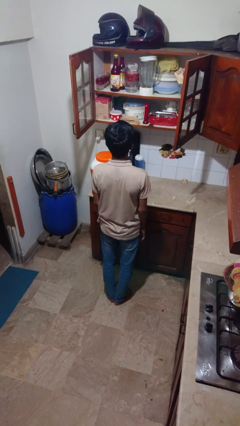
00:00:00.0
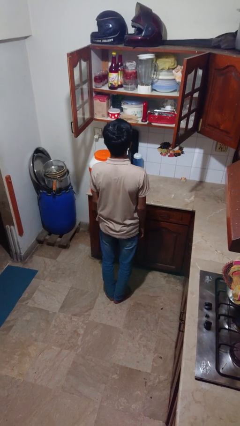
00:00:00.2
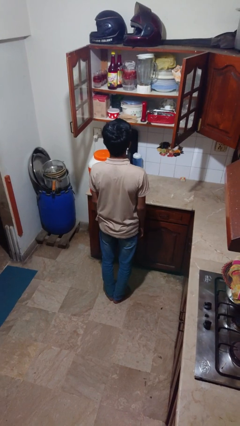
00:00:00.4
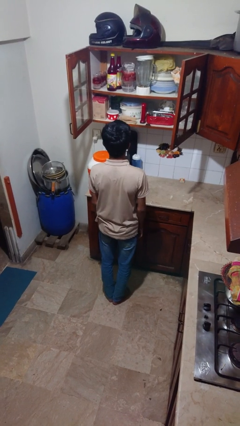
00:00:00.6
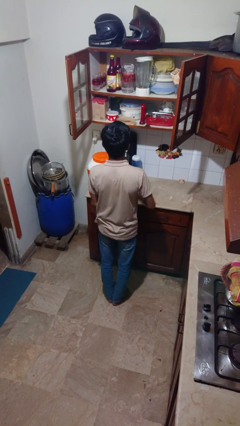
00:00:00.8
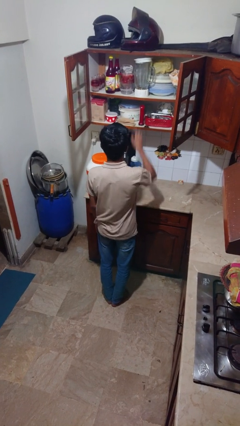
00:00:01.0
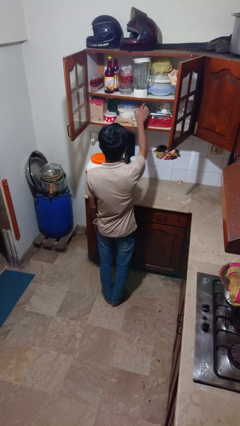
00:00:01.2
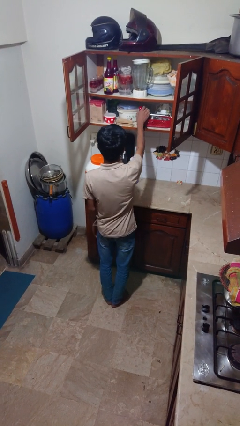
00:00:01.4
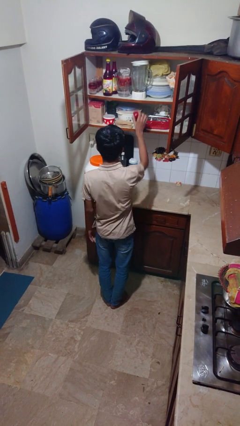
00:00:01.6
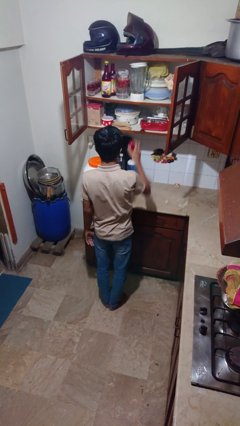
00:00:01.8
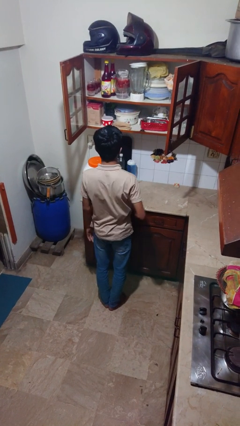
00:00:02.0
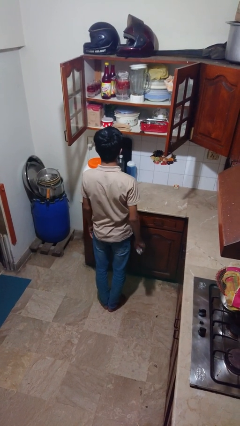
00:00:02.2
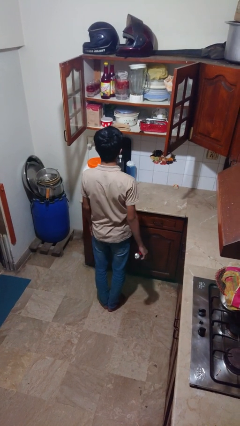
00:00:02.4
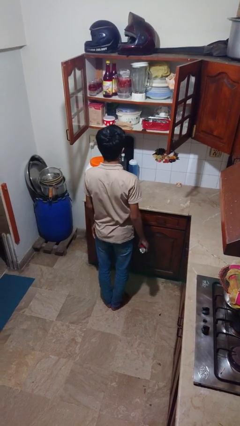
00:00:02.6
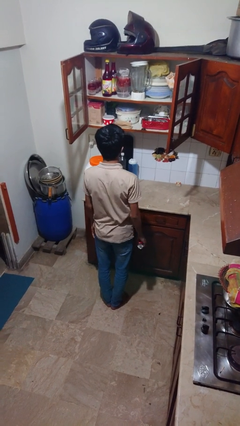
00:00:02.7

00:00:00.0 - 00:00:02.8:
person picks up object from cabinet

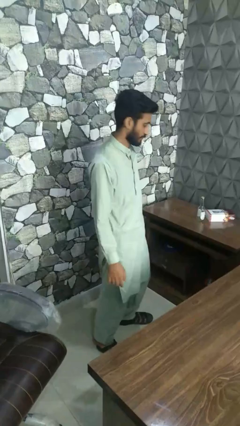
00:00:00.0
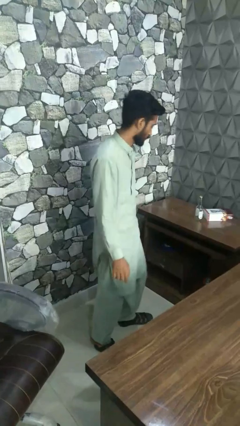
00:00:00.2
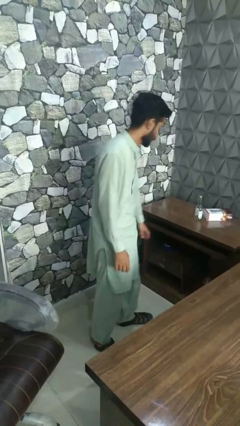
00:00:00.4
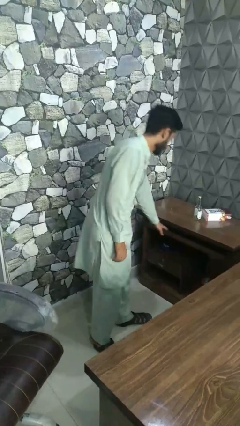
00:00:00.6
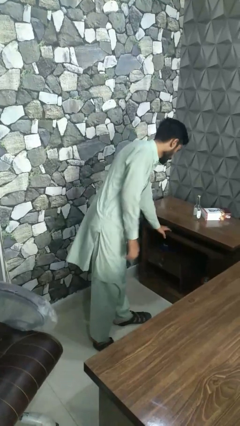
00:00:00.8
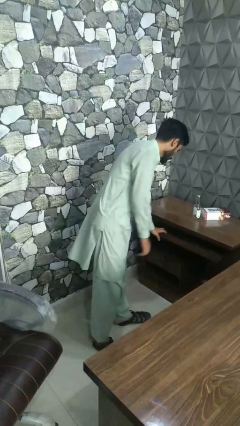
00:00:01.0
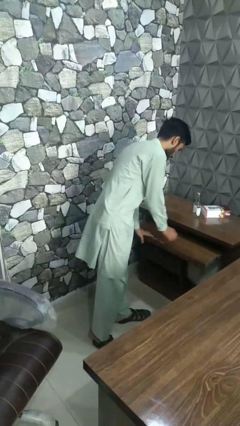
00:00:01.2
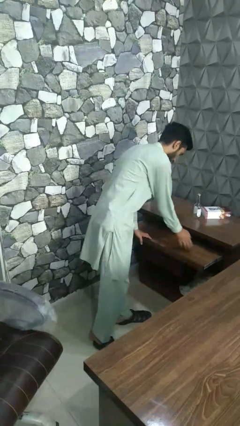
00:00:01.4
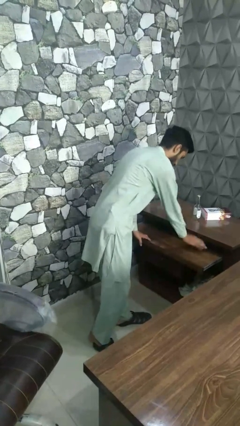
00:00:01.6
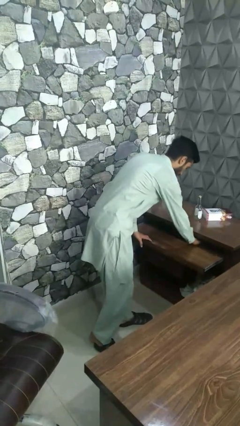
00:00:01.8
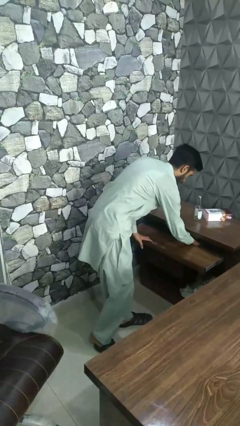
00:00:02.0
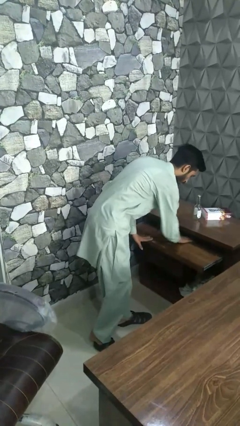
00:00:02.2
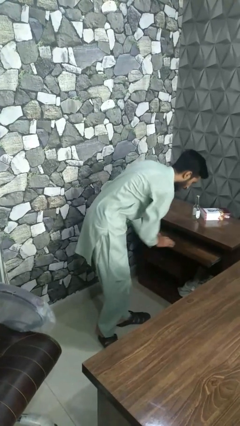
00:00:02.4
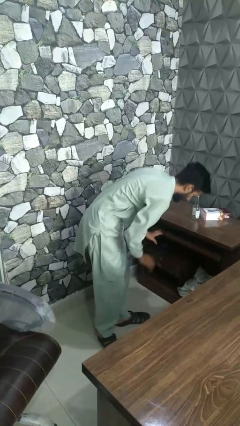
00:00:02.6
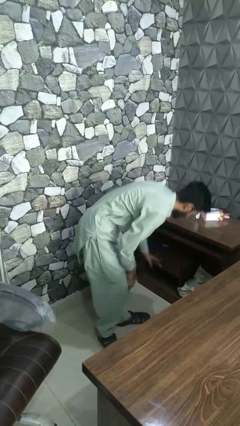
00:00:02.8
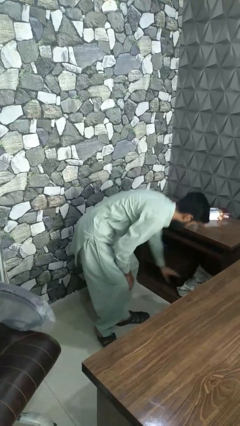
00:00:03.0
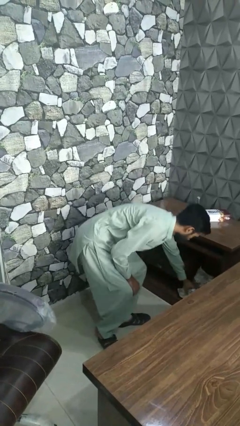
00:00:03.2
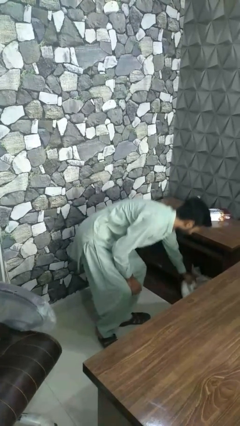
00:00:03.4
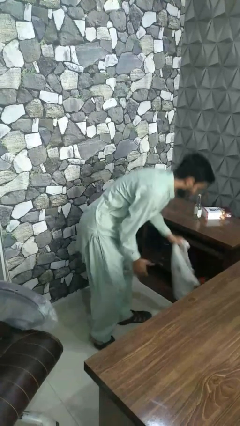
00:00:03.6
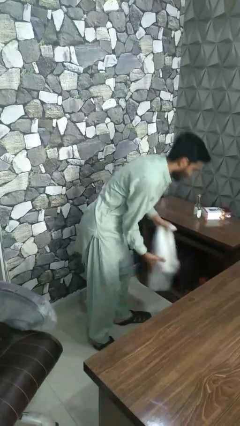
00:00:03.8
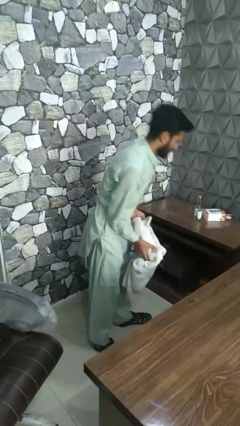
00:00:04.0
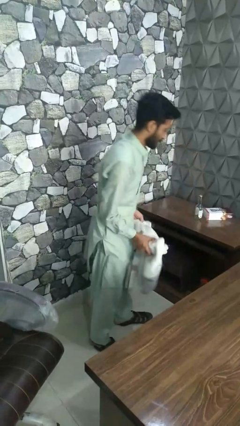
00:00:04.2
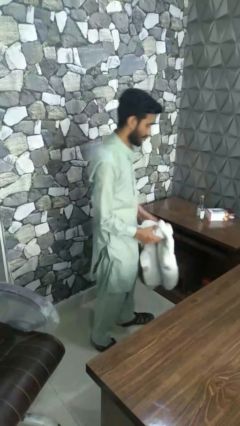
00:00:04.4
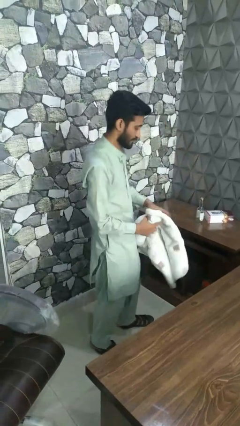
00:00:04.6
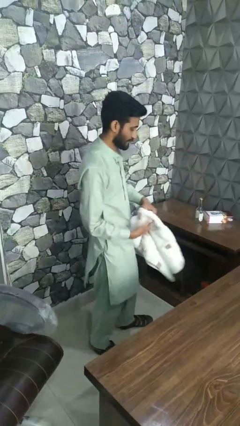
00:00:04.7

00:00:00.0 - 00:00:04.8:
person takes clothes from dresser

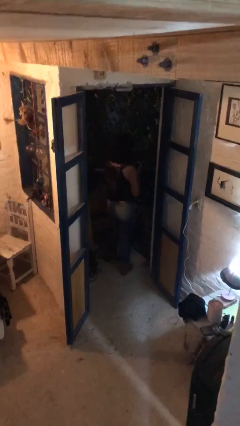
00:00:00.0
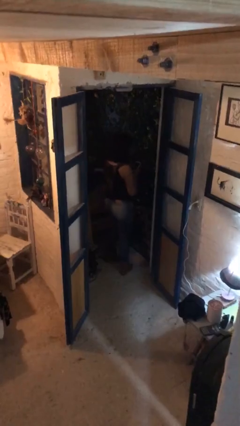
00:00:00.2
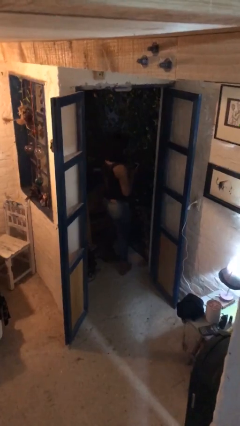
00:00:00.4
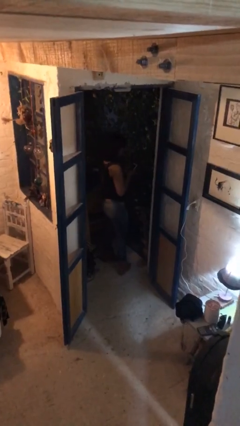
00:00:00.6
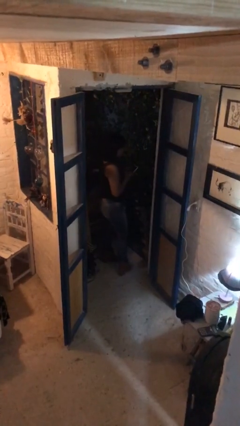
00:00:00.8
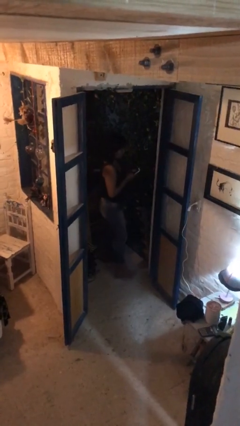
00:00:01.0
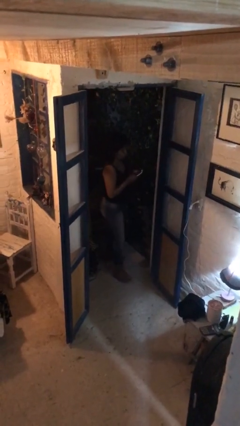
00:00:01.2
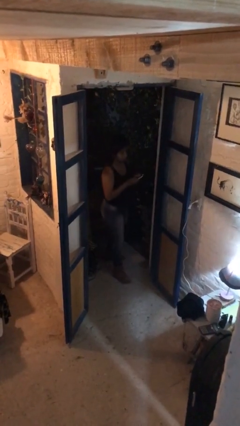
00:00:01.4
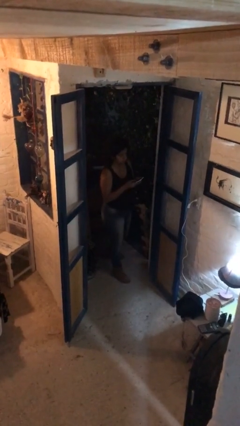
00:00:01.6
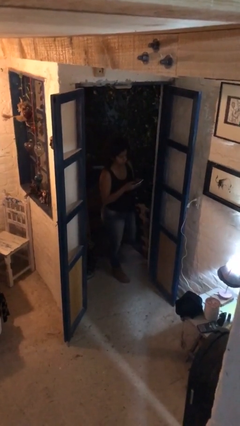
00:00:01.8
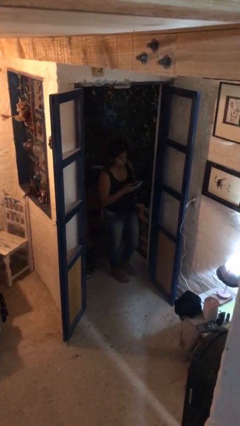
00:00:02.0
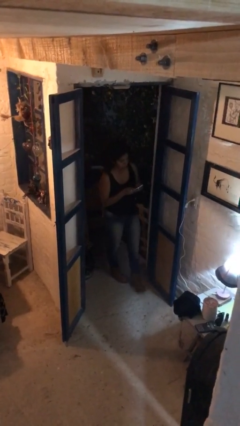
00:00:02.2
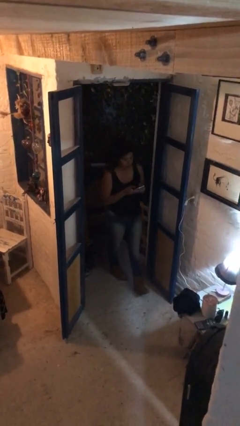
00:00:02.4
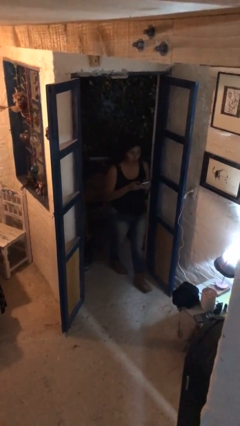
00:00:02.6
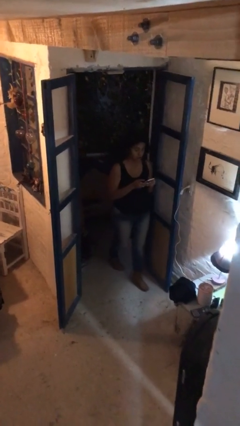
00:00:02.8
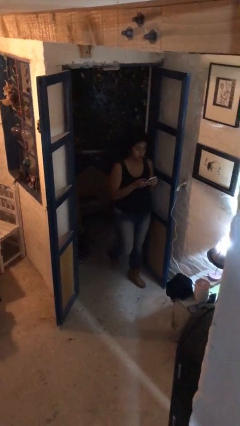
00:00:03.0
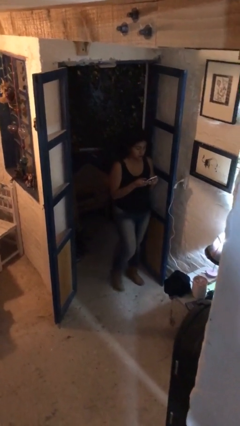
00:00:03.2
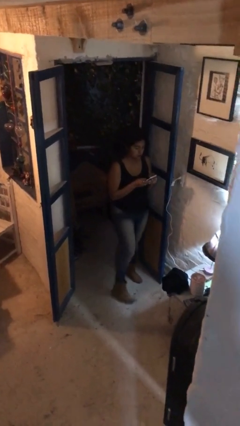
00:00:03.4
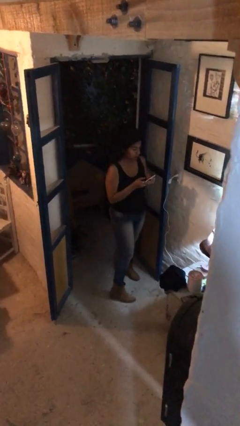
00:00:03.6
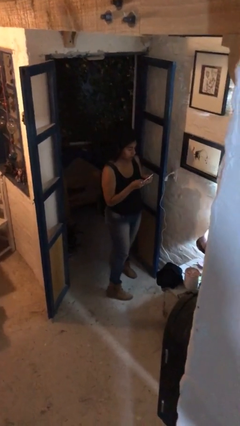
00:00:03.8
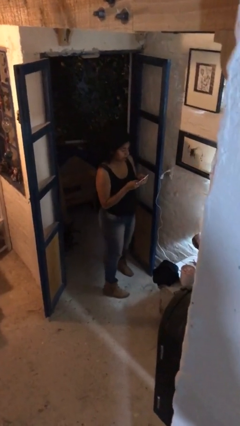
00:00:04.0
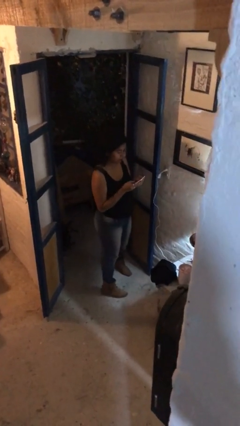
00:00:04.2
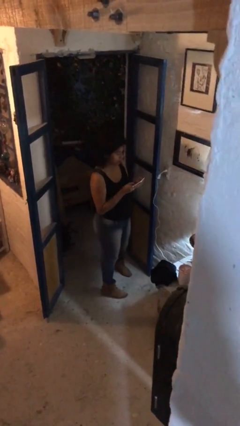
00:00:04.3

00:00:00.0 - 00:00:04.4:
person enters scene through structure

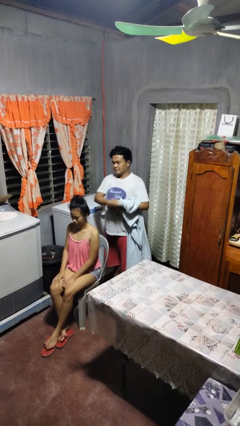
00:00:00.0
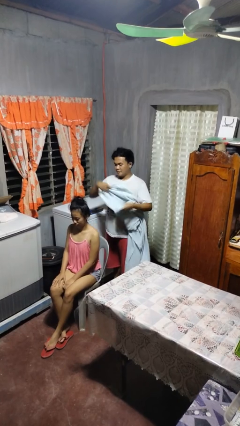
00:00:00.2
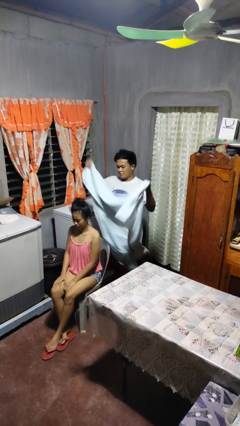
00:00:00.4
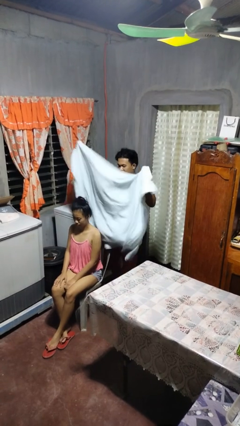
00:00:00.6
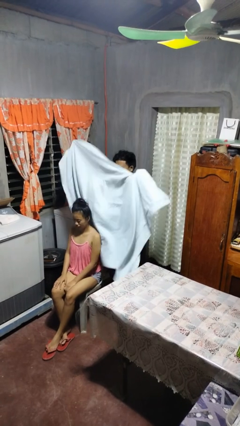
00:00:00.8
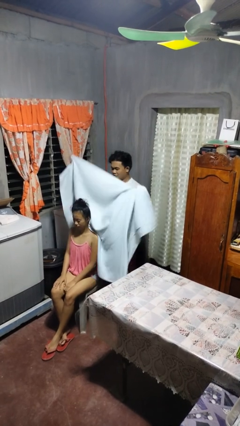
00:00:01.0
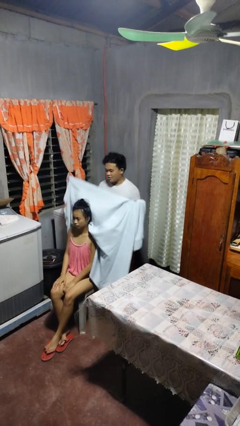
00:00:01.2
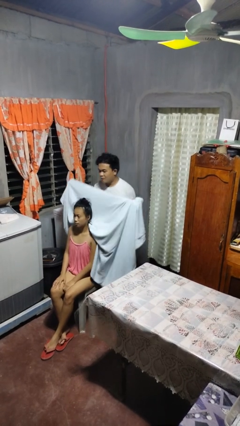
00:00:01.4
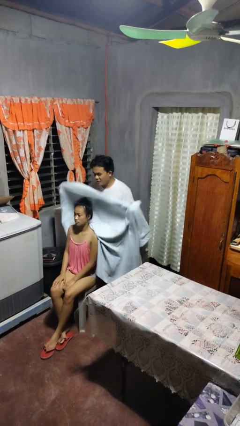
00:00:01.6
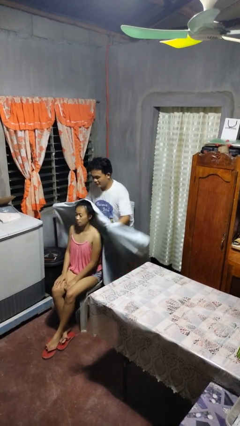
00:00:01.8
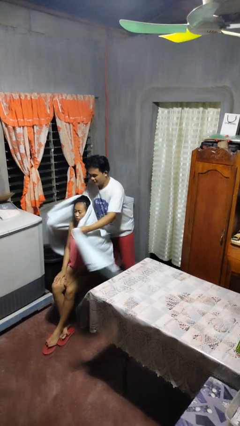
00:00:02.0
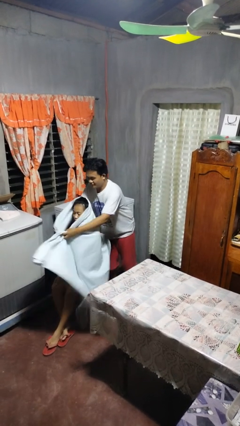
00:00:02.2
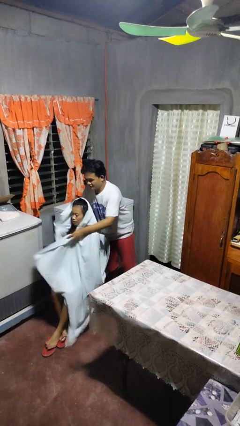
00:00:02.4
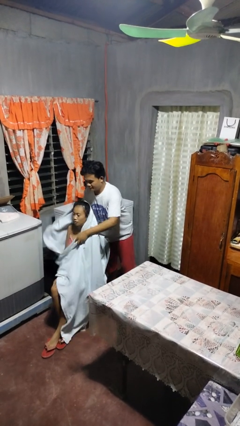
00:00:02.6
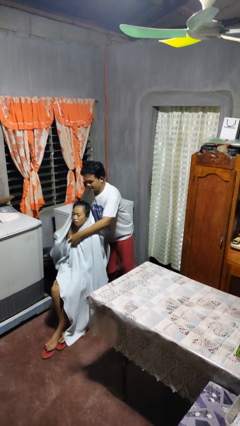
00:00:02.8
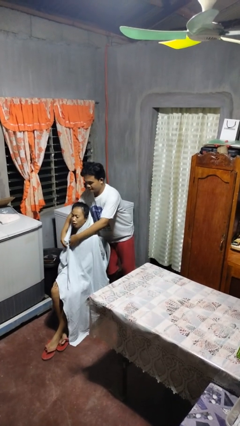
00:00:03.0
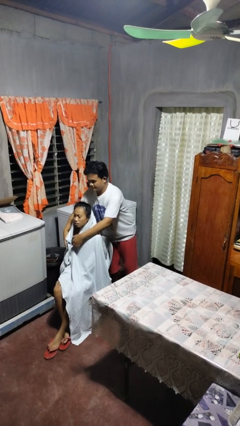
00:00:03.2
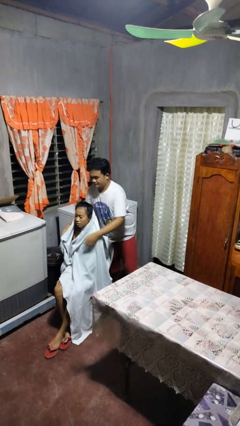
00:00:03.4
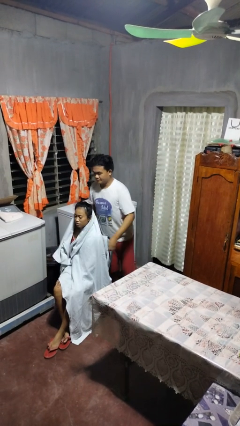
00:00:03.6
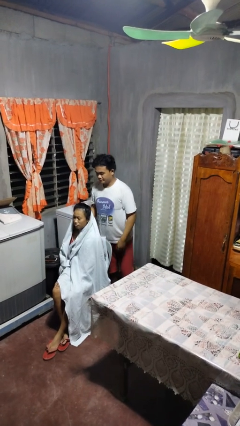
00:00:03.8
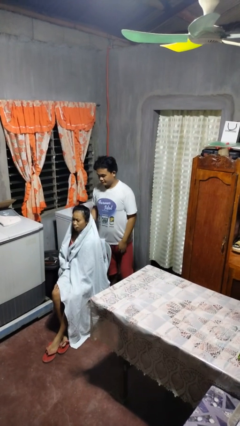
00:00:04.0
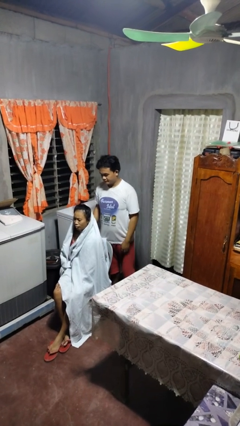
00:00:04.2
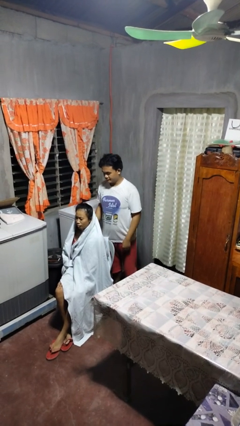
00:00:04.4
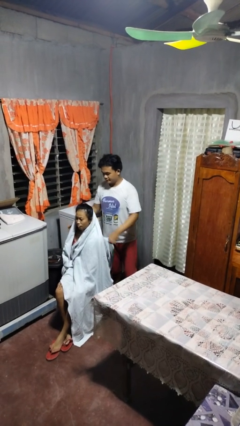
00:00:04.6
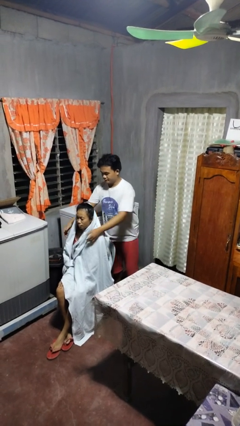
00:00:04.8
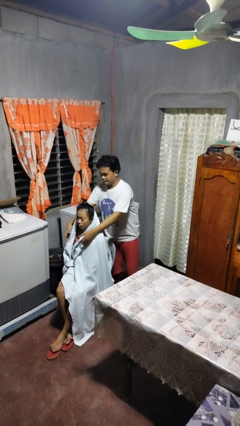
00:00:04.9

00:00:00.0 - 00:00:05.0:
person covers friend with blanket

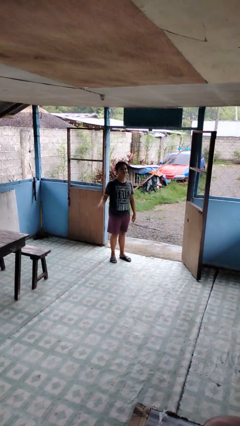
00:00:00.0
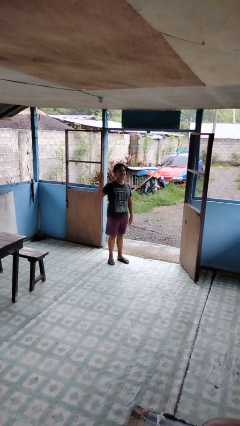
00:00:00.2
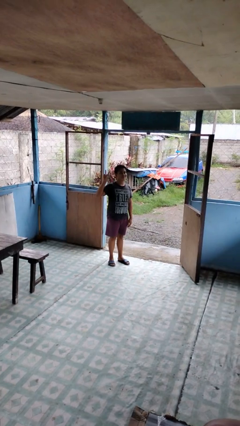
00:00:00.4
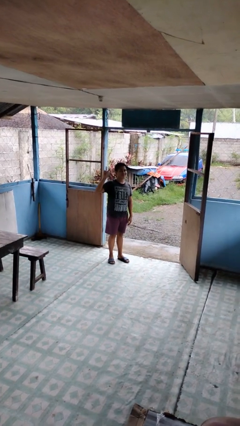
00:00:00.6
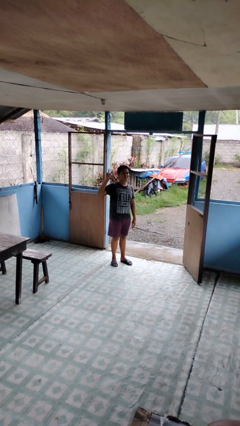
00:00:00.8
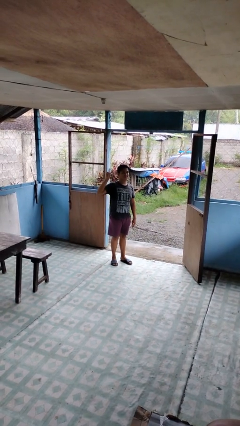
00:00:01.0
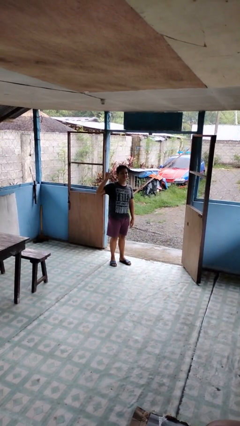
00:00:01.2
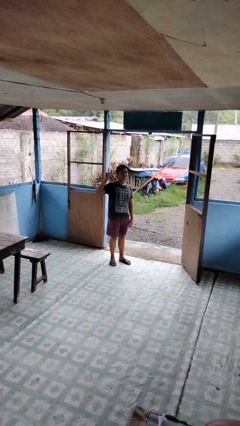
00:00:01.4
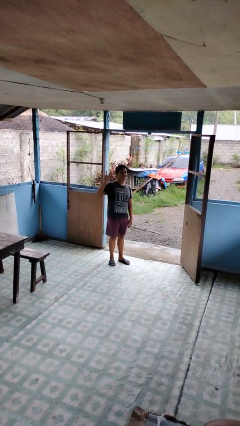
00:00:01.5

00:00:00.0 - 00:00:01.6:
person gestures peace
